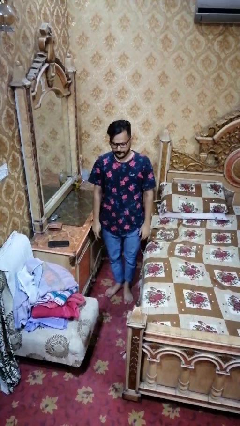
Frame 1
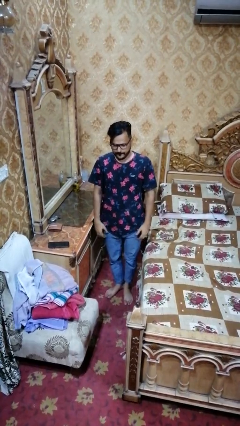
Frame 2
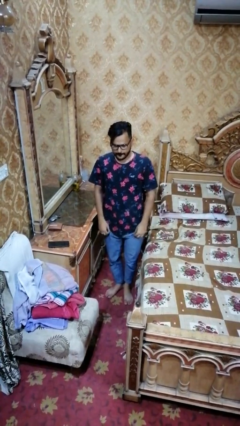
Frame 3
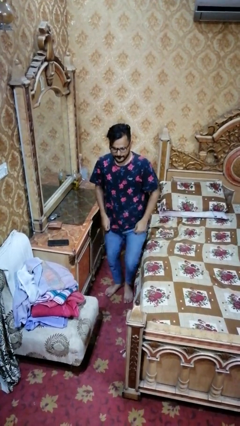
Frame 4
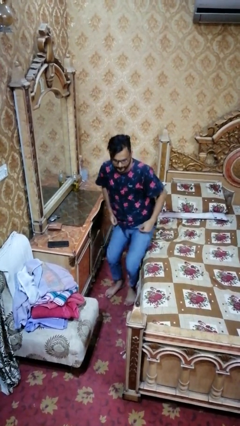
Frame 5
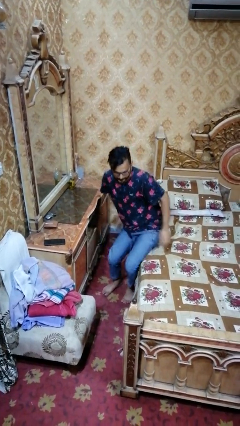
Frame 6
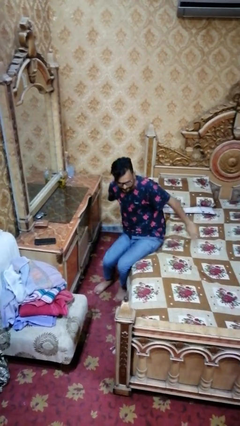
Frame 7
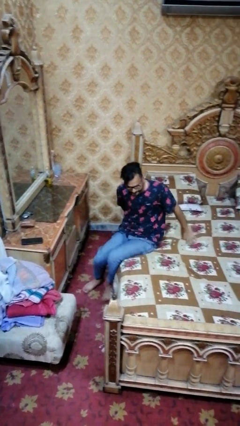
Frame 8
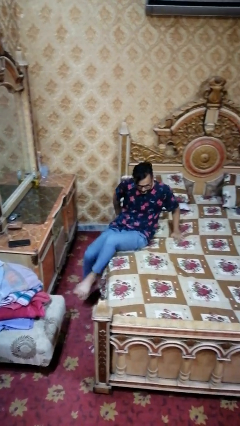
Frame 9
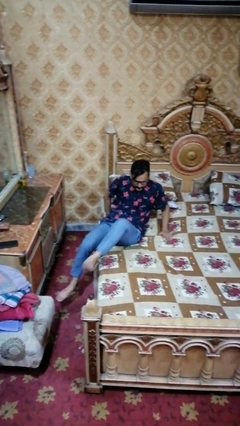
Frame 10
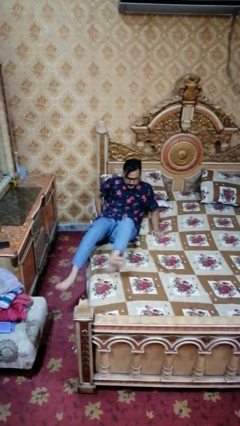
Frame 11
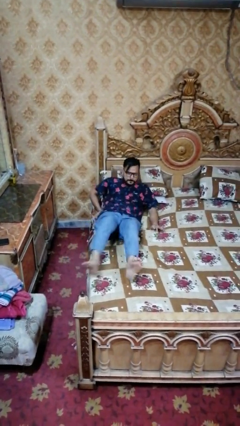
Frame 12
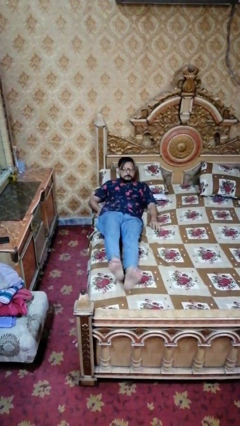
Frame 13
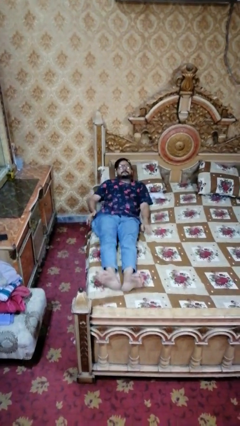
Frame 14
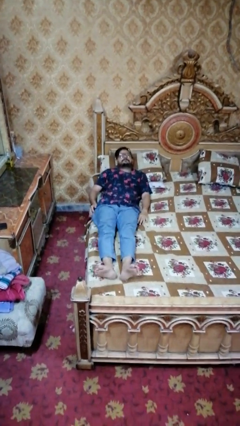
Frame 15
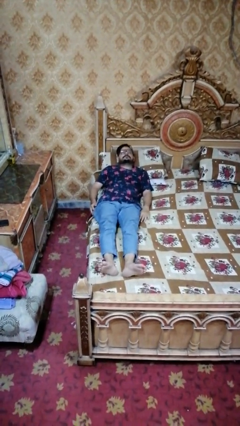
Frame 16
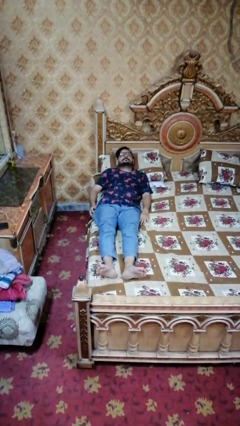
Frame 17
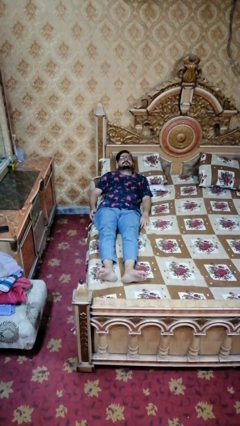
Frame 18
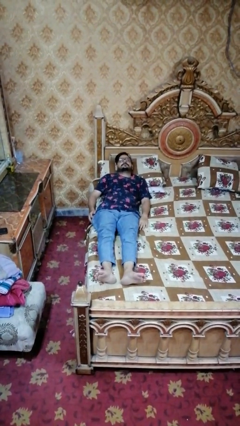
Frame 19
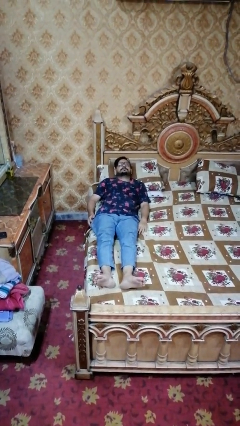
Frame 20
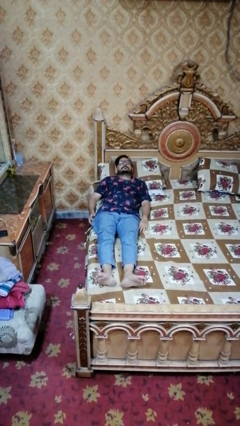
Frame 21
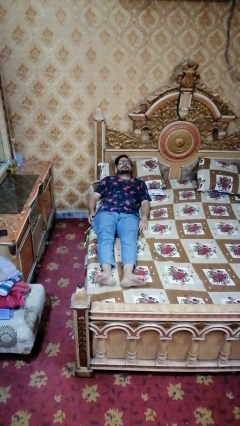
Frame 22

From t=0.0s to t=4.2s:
person lies down on bed

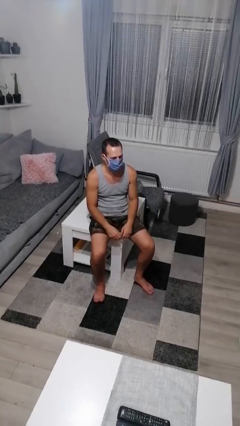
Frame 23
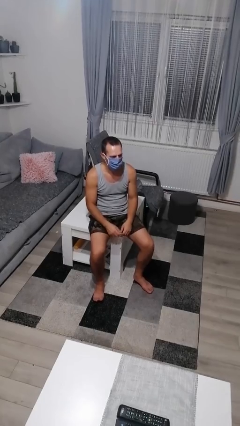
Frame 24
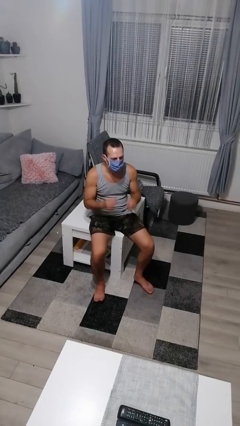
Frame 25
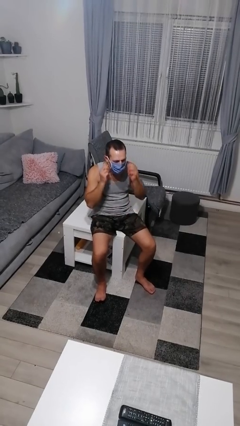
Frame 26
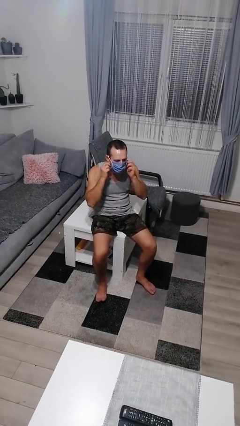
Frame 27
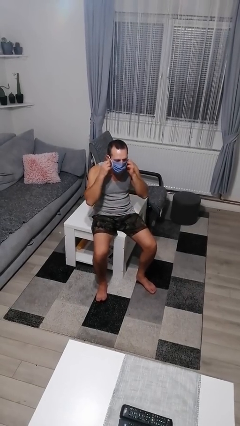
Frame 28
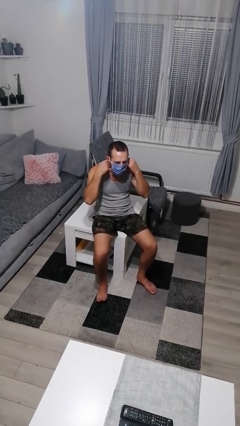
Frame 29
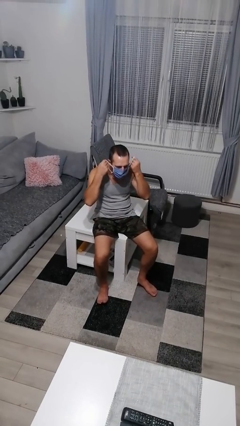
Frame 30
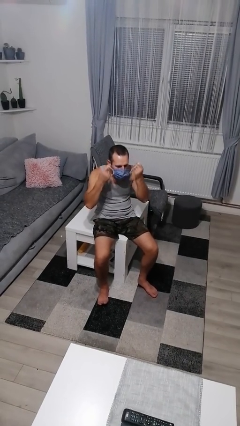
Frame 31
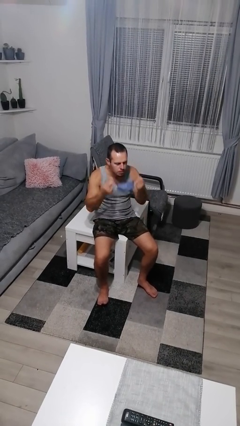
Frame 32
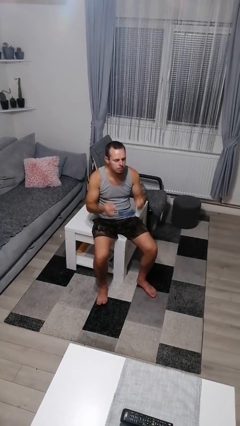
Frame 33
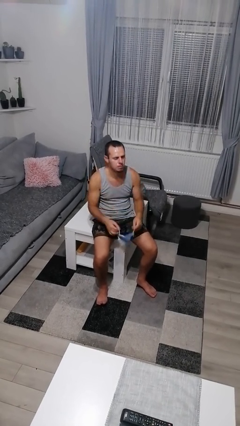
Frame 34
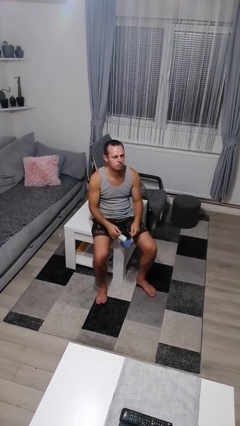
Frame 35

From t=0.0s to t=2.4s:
person takes off facemask

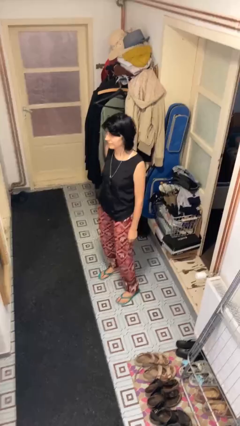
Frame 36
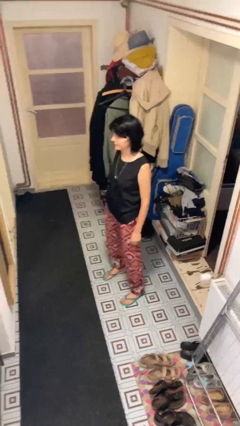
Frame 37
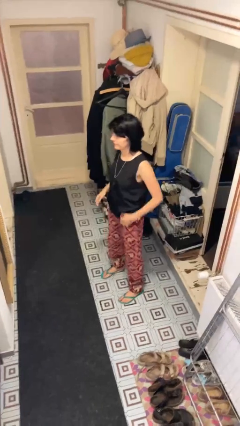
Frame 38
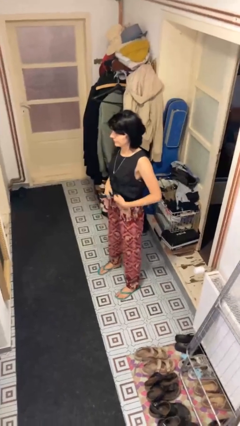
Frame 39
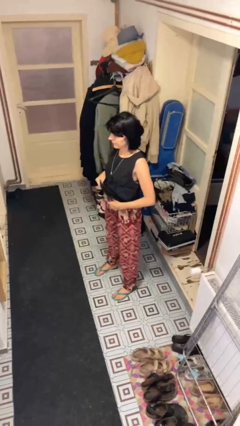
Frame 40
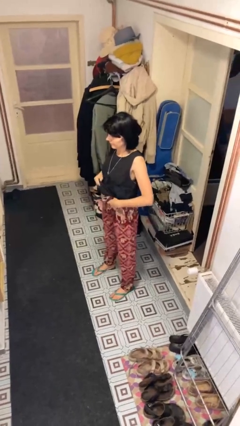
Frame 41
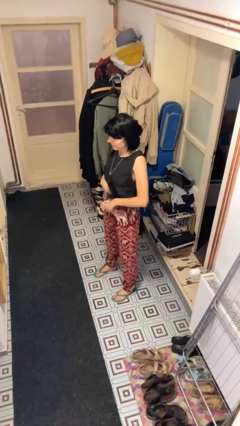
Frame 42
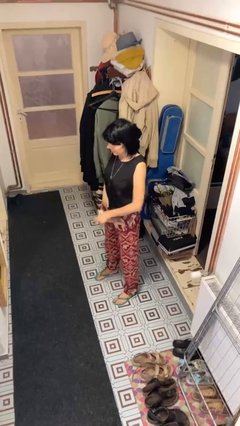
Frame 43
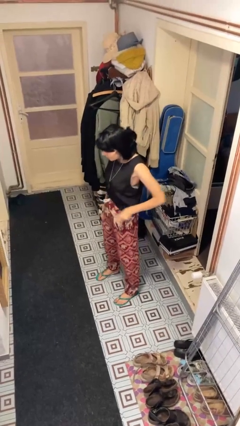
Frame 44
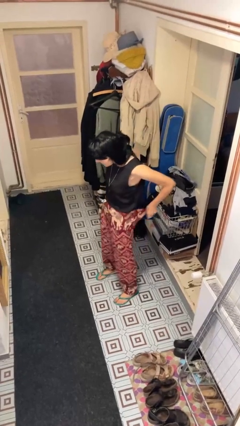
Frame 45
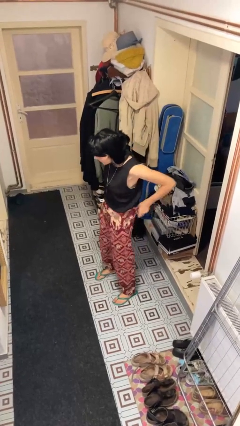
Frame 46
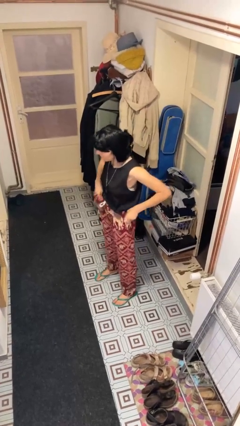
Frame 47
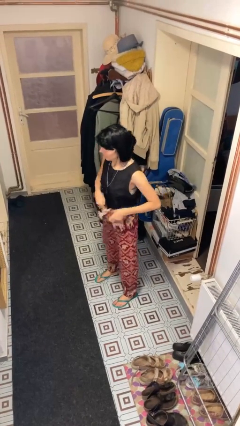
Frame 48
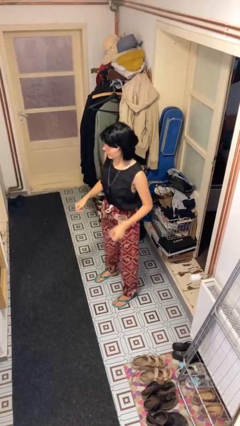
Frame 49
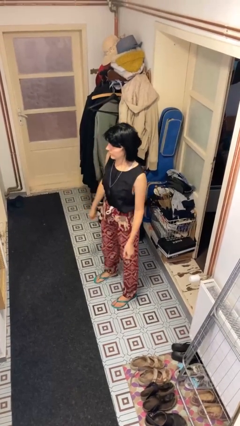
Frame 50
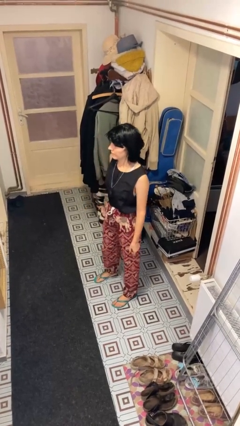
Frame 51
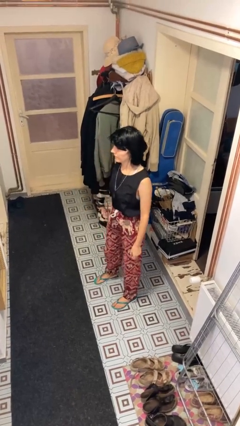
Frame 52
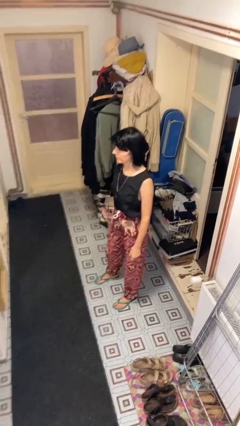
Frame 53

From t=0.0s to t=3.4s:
person tucks in shirt

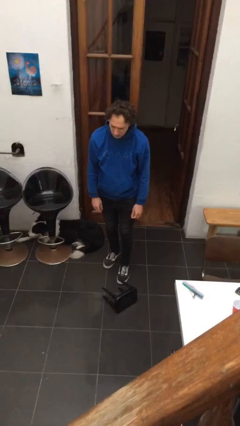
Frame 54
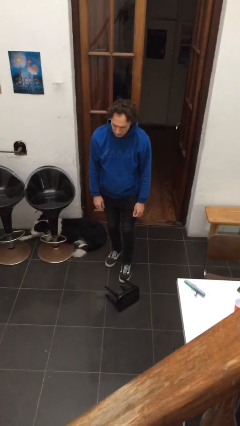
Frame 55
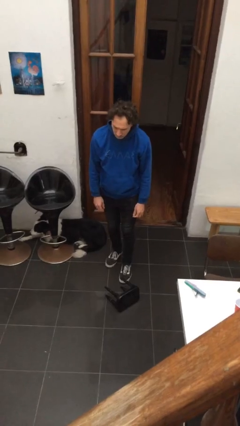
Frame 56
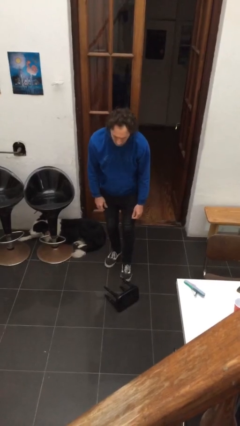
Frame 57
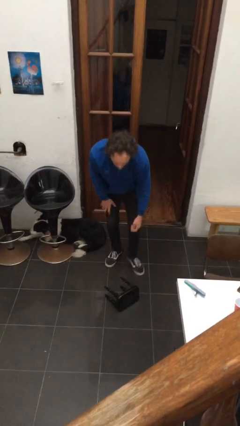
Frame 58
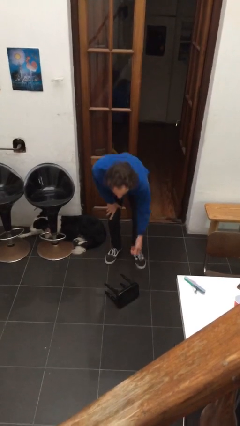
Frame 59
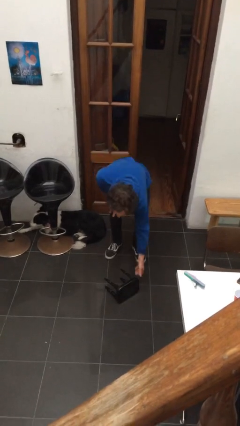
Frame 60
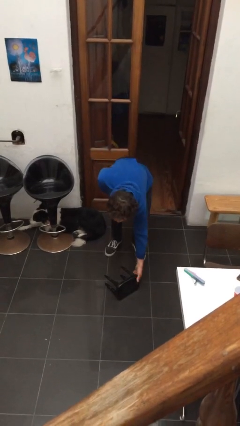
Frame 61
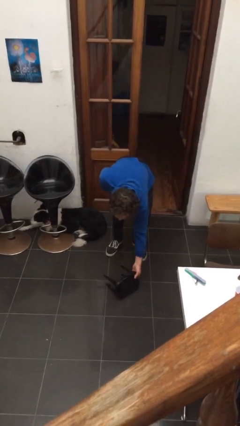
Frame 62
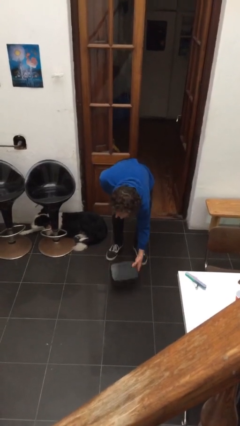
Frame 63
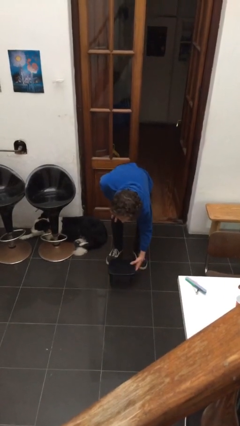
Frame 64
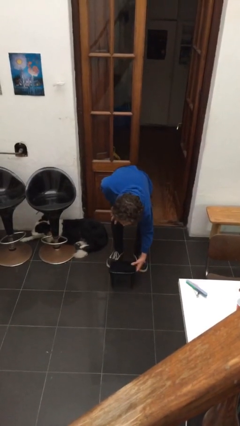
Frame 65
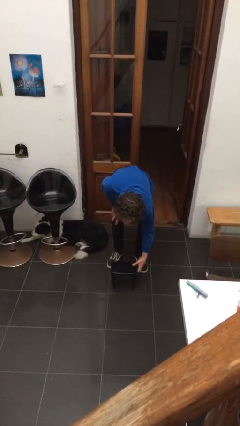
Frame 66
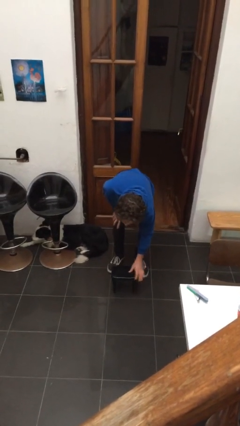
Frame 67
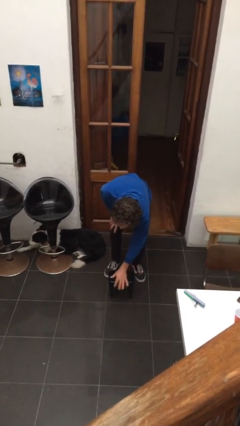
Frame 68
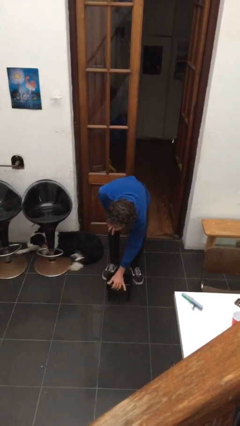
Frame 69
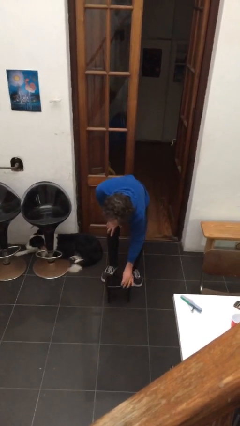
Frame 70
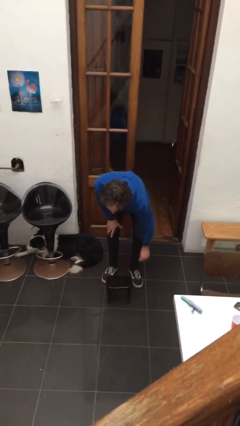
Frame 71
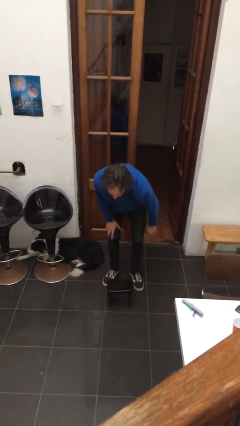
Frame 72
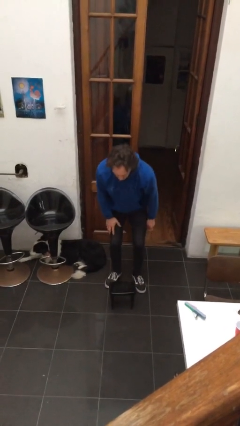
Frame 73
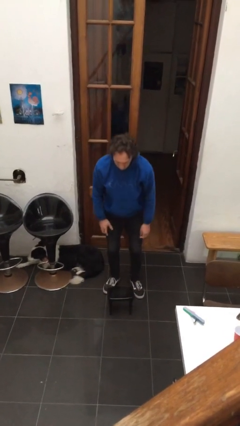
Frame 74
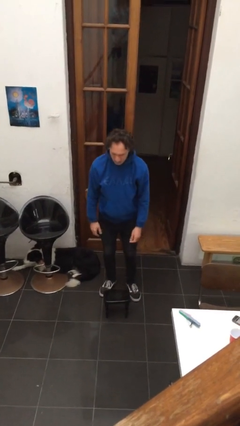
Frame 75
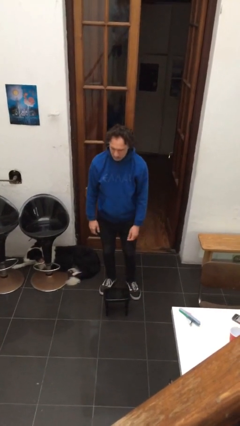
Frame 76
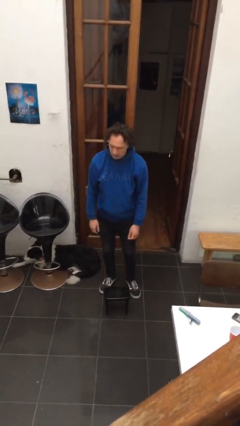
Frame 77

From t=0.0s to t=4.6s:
person sets upright furniture

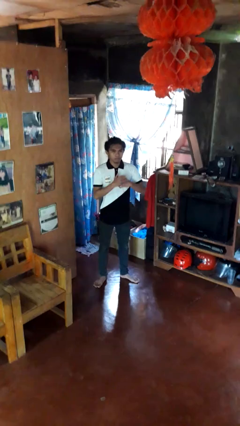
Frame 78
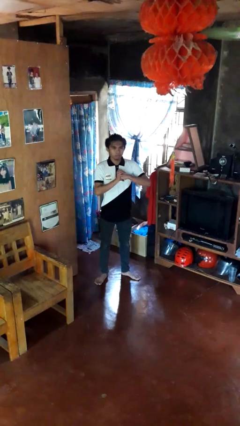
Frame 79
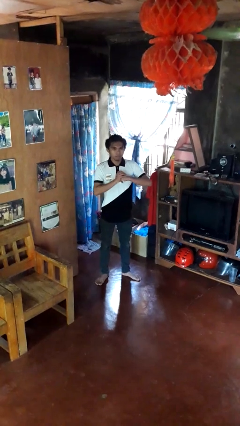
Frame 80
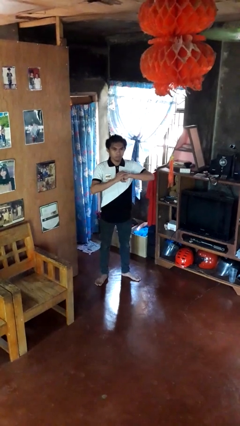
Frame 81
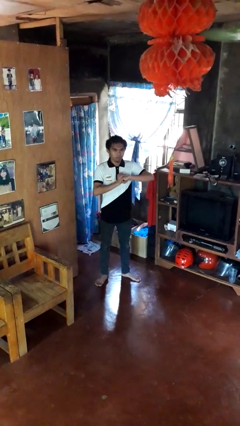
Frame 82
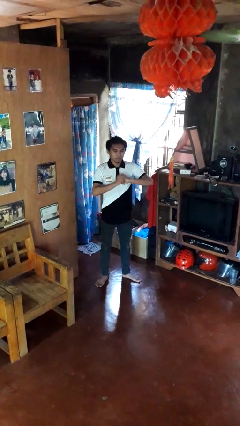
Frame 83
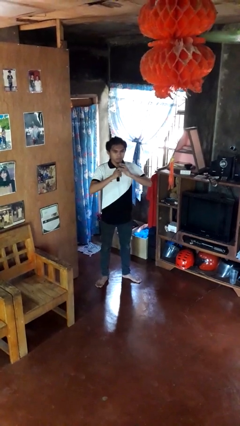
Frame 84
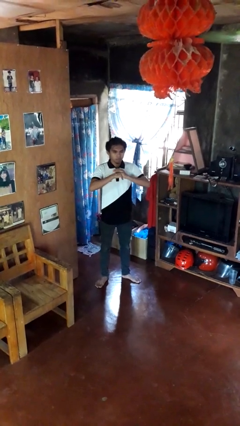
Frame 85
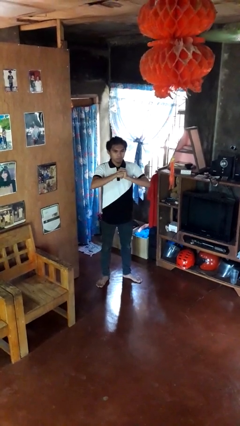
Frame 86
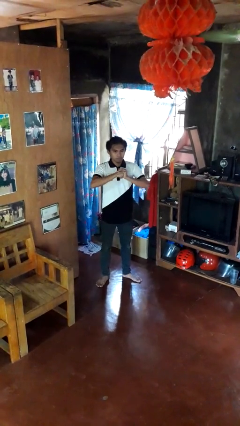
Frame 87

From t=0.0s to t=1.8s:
person cracks knuckles

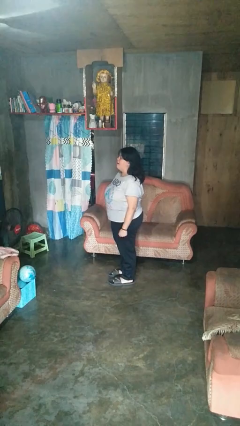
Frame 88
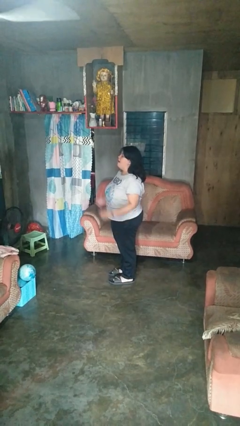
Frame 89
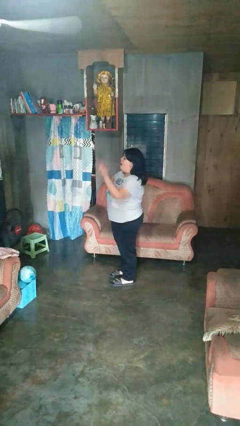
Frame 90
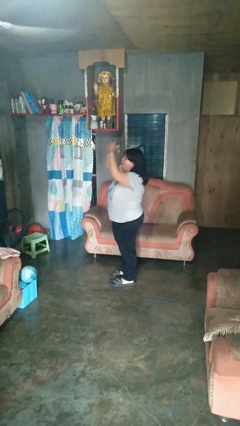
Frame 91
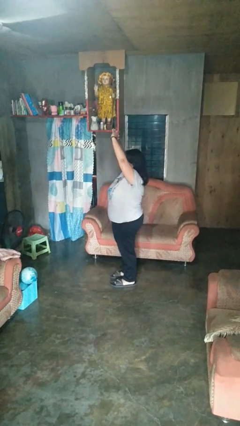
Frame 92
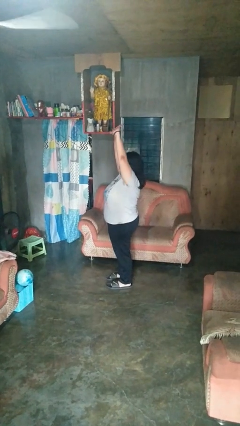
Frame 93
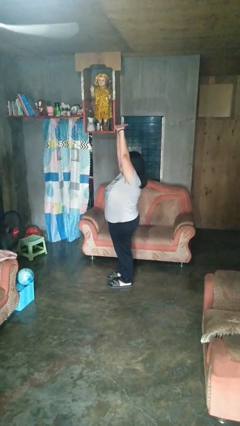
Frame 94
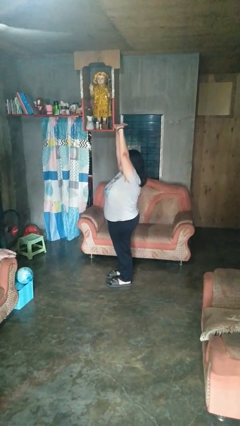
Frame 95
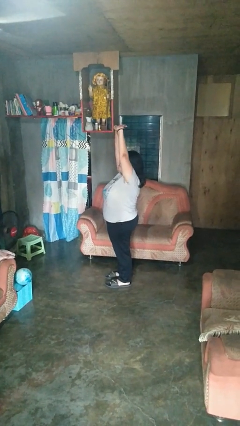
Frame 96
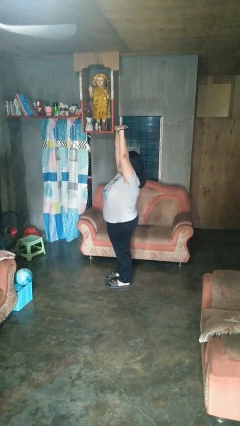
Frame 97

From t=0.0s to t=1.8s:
person stretches arms over head
